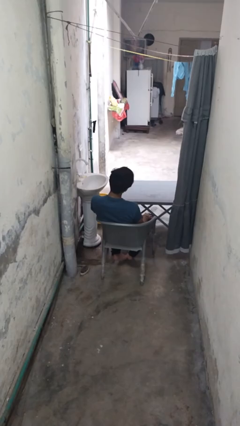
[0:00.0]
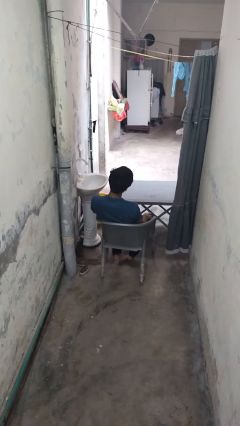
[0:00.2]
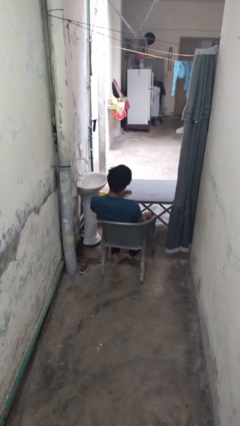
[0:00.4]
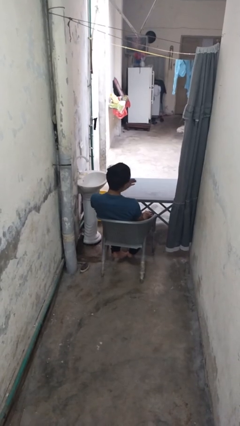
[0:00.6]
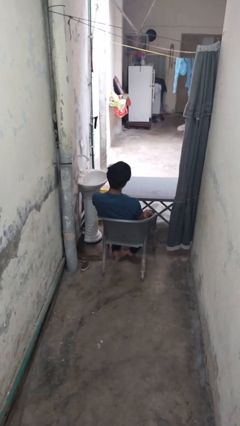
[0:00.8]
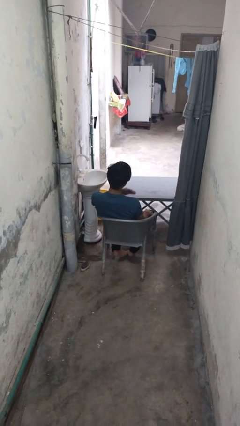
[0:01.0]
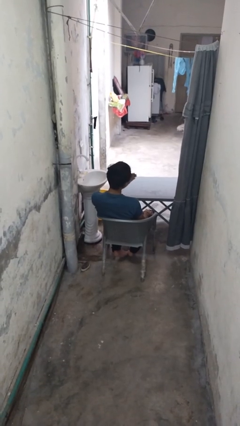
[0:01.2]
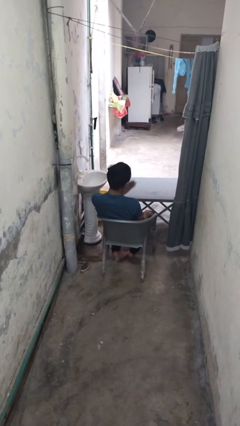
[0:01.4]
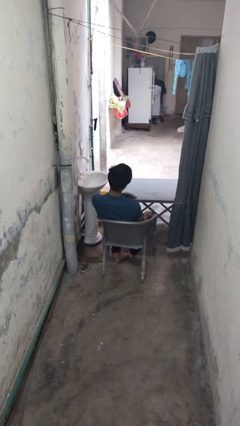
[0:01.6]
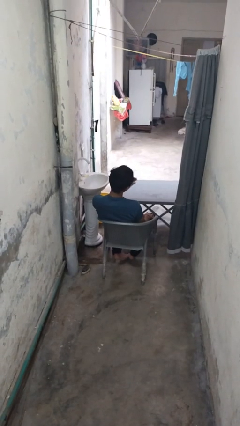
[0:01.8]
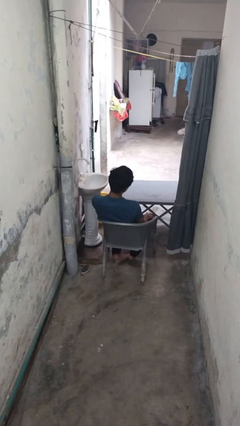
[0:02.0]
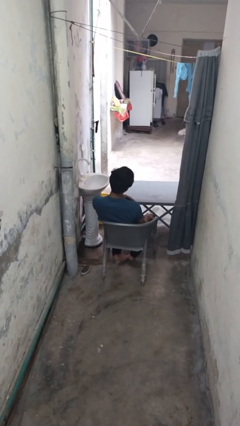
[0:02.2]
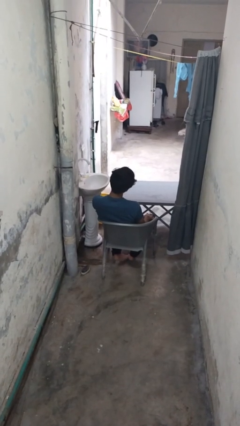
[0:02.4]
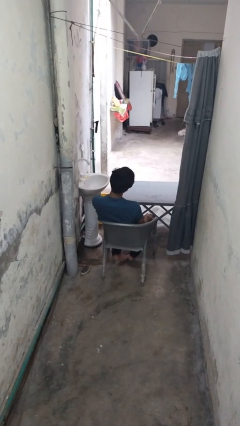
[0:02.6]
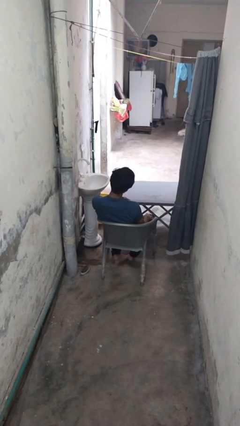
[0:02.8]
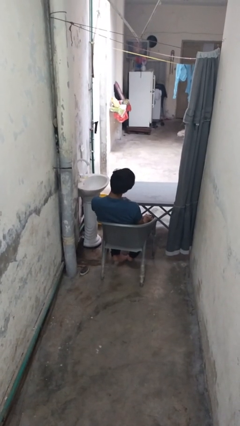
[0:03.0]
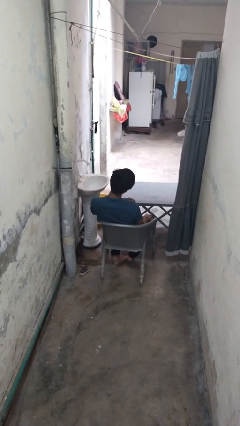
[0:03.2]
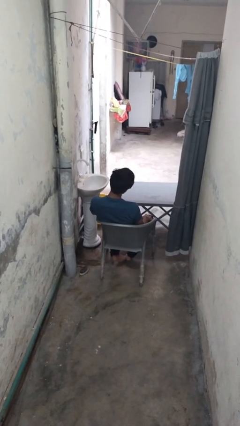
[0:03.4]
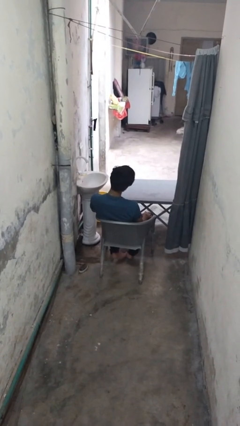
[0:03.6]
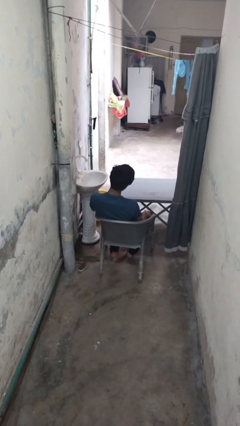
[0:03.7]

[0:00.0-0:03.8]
person drums on chest

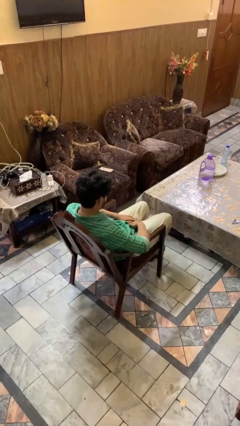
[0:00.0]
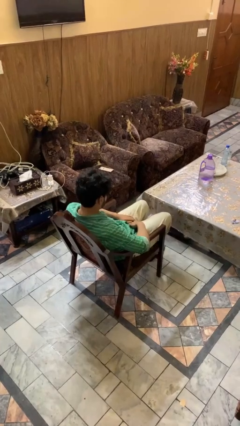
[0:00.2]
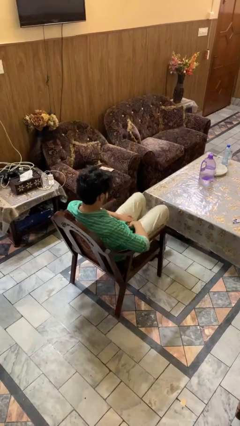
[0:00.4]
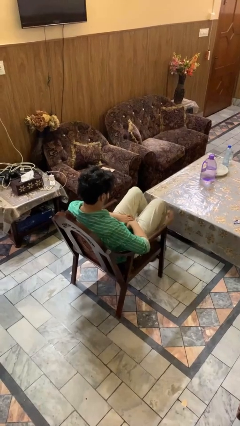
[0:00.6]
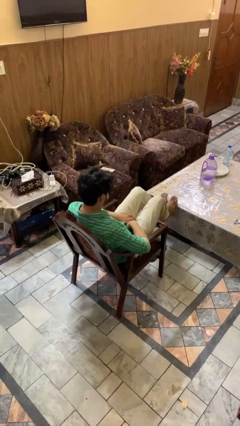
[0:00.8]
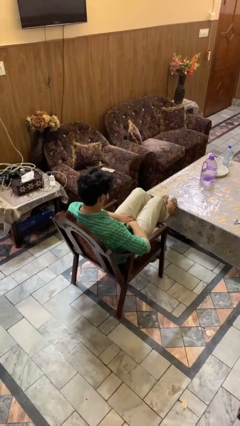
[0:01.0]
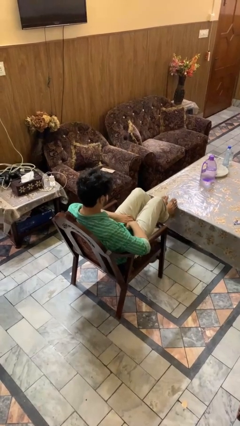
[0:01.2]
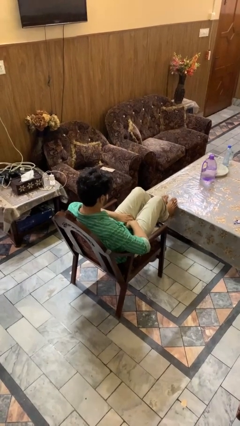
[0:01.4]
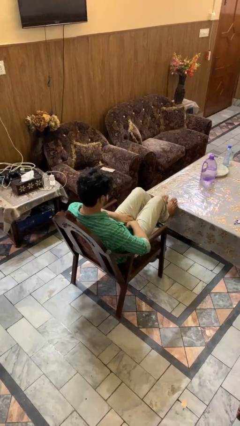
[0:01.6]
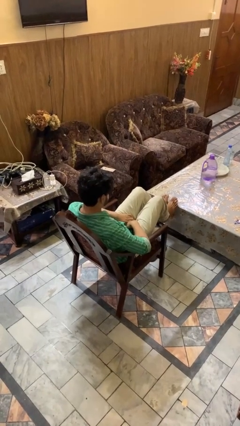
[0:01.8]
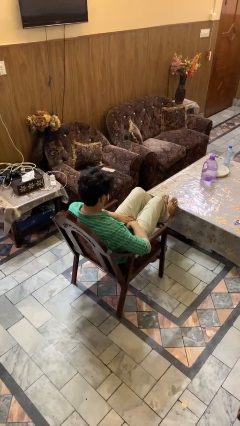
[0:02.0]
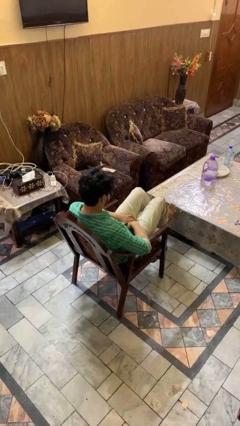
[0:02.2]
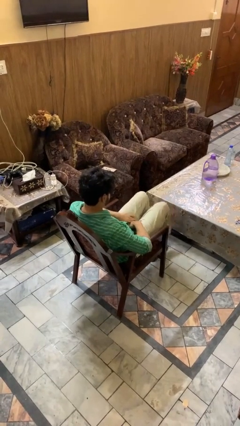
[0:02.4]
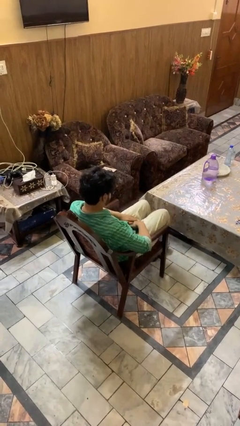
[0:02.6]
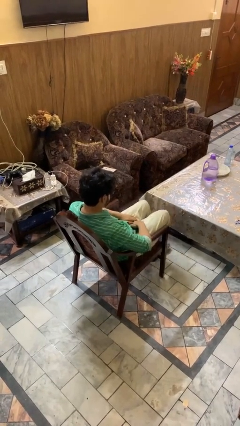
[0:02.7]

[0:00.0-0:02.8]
person puts feet up

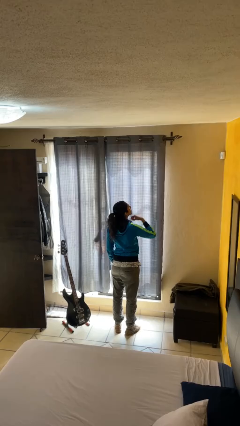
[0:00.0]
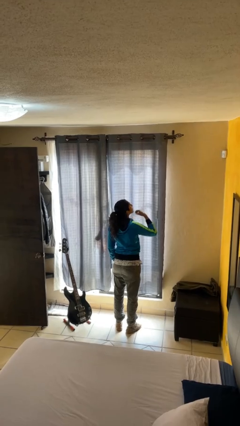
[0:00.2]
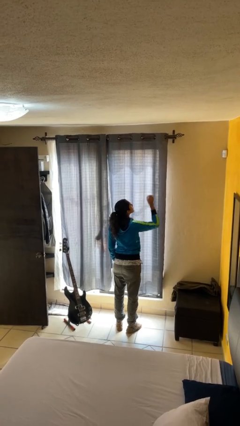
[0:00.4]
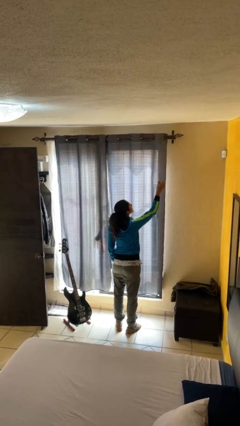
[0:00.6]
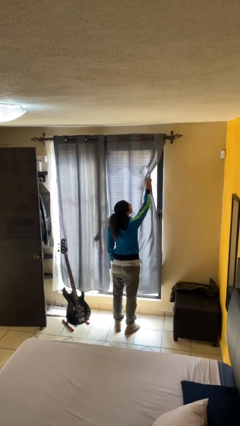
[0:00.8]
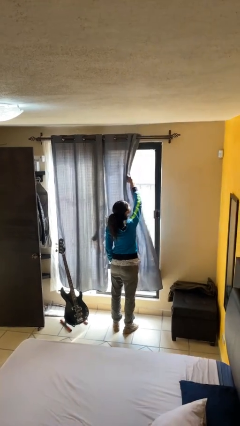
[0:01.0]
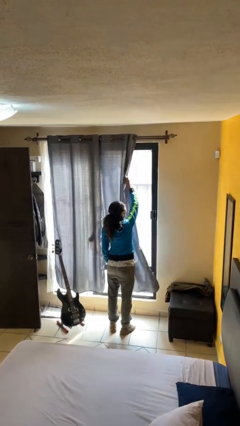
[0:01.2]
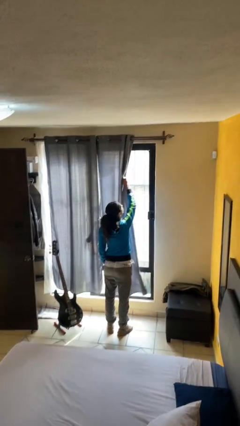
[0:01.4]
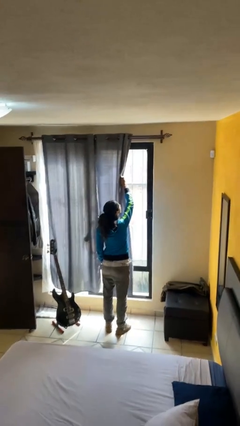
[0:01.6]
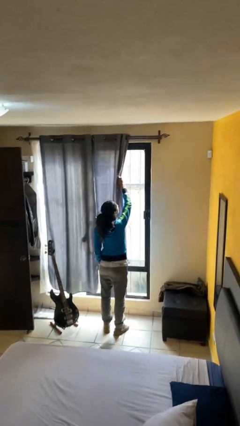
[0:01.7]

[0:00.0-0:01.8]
person opens curtains

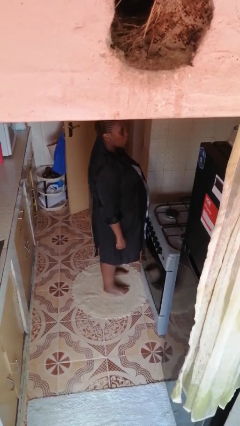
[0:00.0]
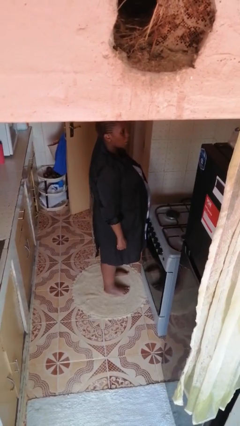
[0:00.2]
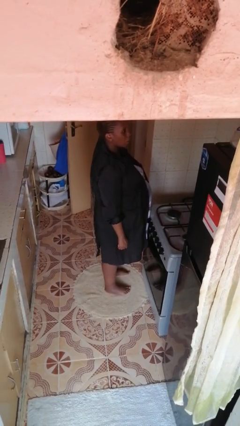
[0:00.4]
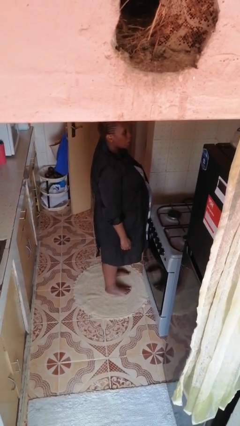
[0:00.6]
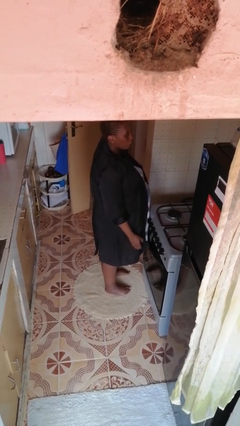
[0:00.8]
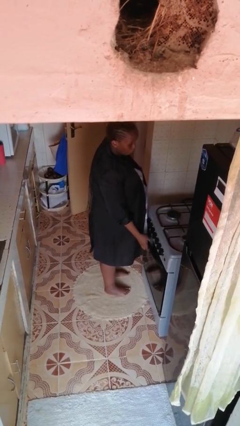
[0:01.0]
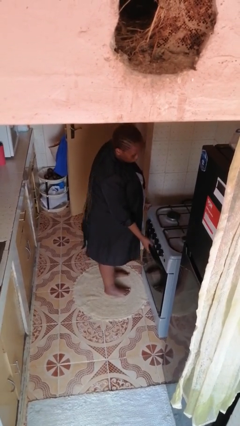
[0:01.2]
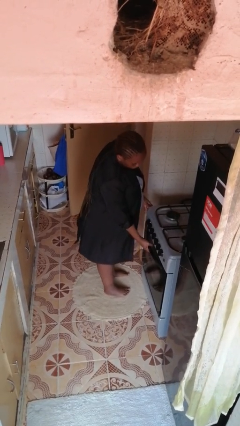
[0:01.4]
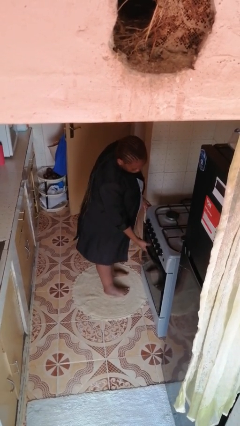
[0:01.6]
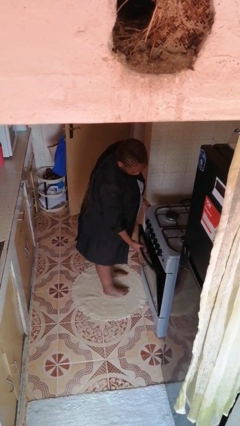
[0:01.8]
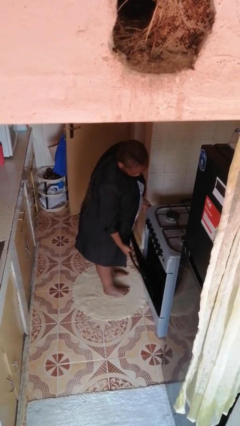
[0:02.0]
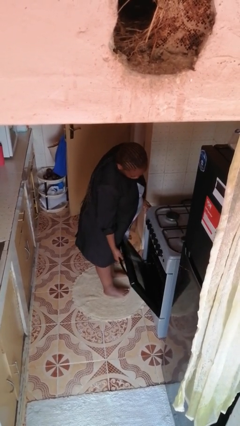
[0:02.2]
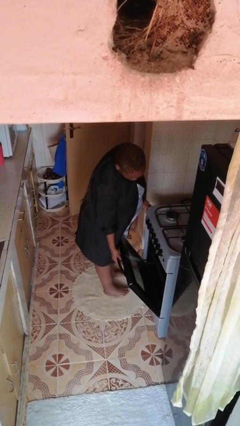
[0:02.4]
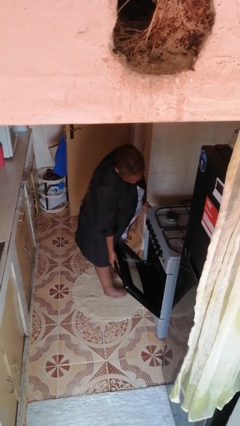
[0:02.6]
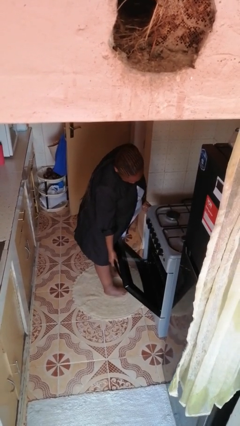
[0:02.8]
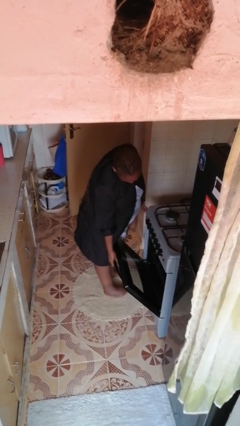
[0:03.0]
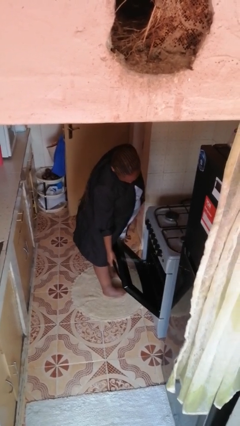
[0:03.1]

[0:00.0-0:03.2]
person opens oven door

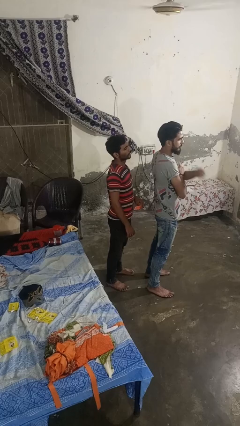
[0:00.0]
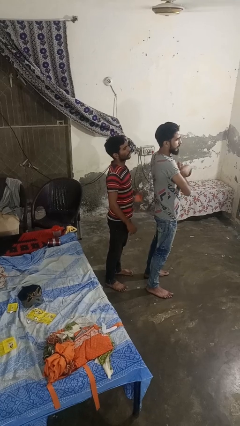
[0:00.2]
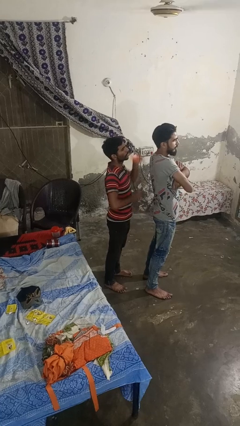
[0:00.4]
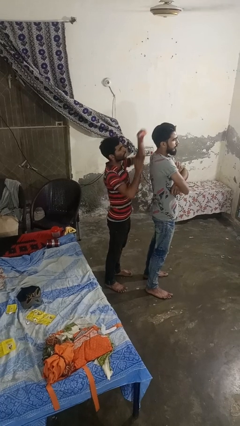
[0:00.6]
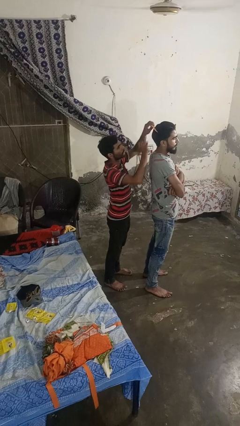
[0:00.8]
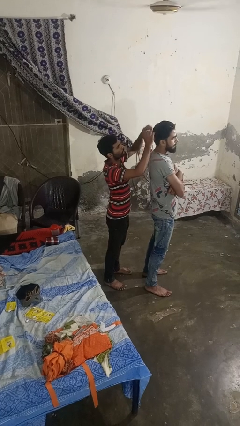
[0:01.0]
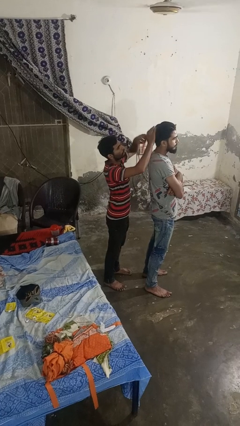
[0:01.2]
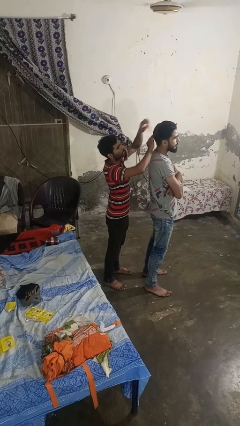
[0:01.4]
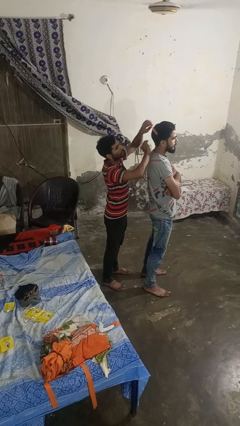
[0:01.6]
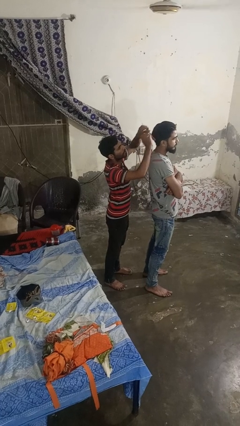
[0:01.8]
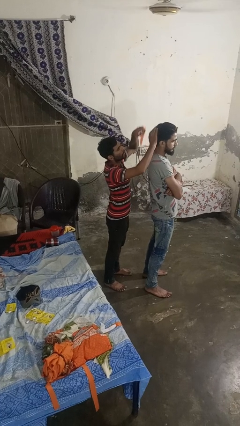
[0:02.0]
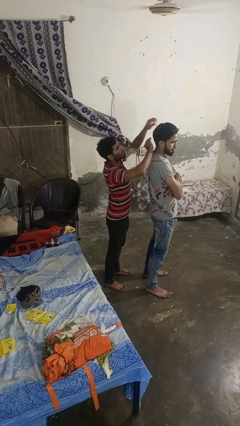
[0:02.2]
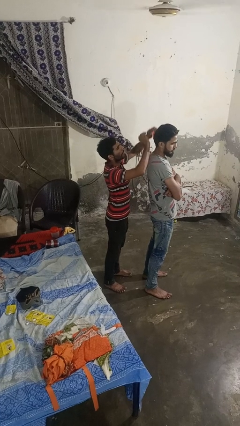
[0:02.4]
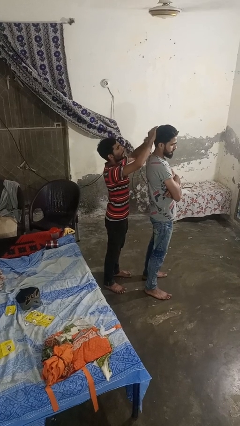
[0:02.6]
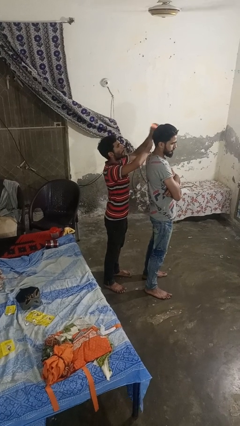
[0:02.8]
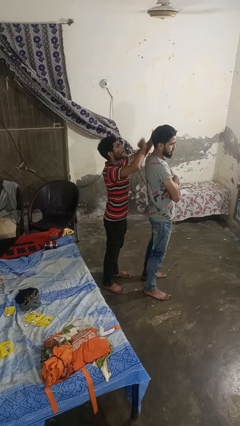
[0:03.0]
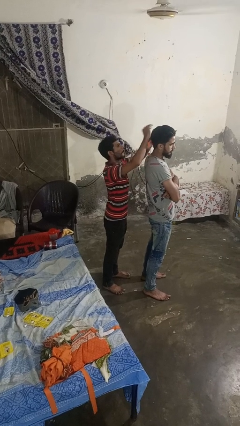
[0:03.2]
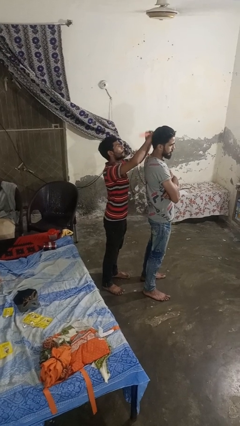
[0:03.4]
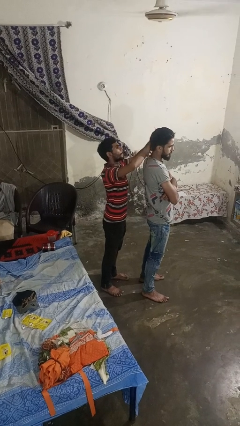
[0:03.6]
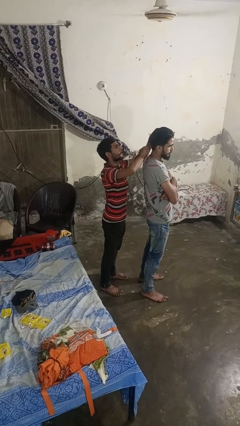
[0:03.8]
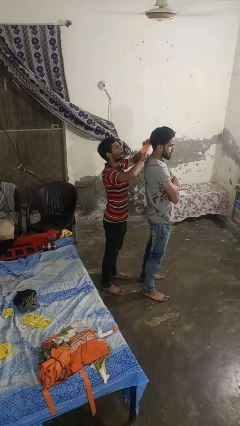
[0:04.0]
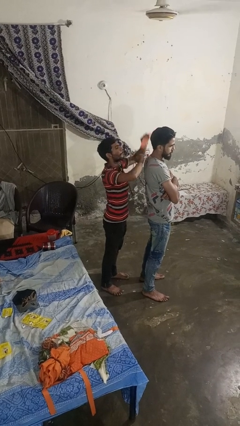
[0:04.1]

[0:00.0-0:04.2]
person brushes hair of person

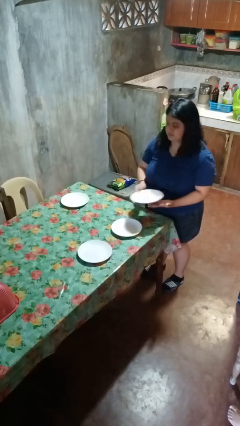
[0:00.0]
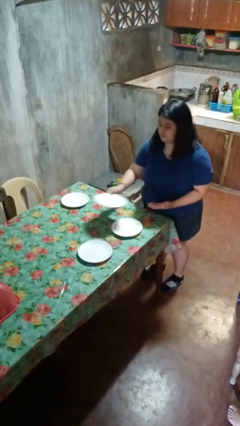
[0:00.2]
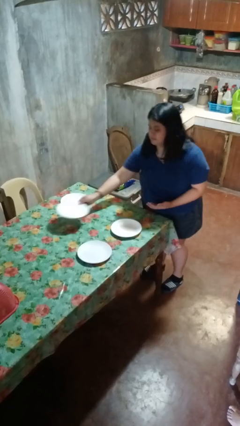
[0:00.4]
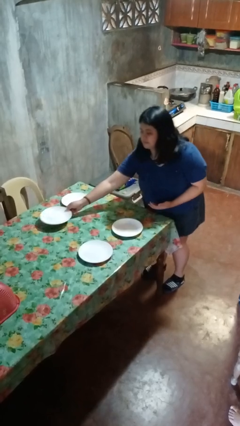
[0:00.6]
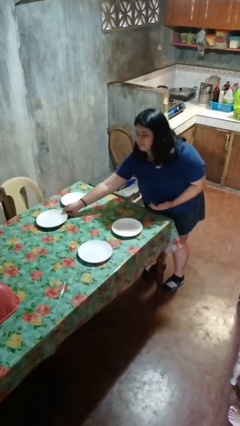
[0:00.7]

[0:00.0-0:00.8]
person sets table

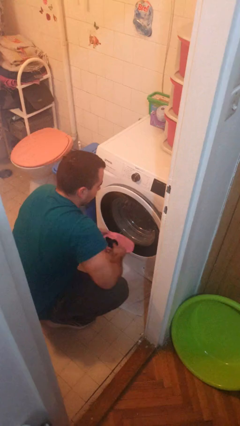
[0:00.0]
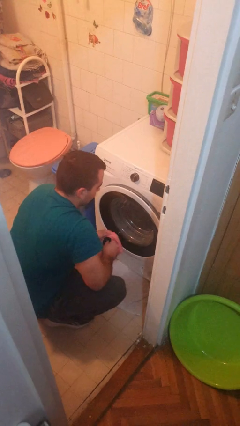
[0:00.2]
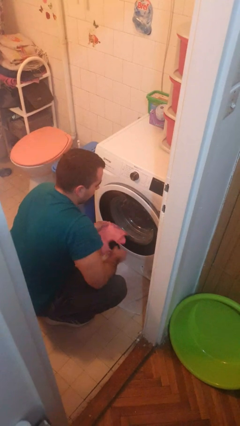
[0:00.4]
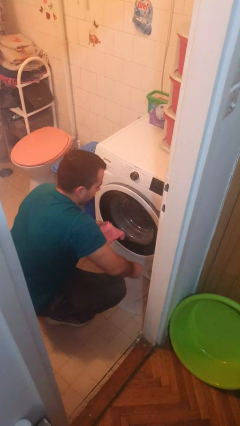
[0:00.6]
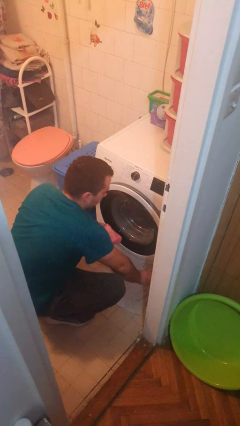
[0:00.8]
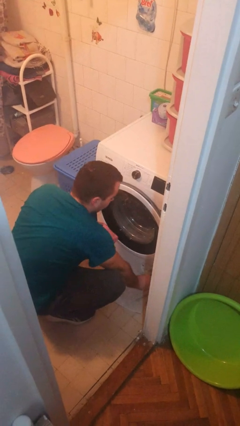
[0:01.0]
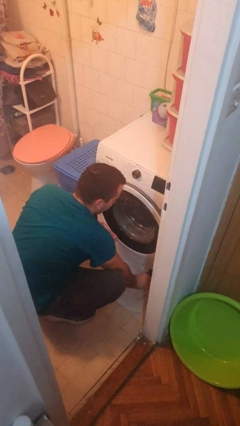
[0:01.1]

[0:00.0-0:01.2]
person cleans dryer lint trap
